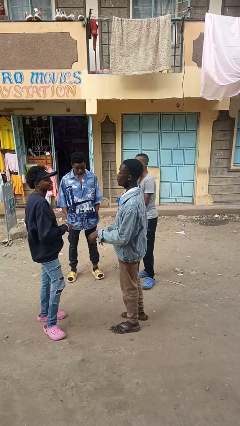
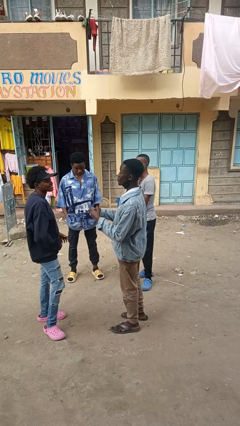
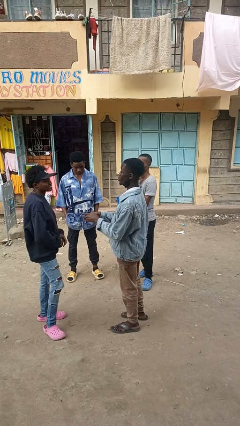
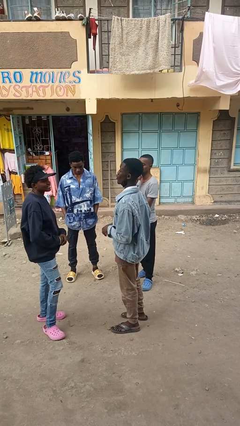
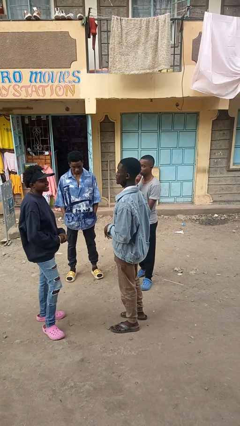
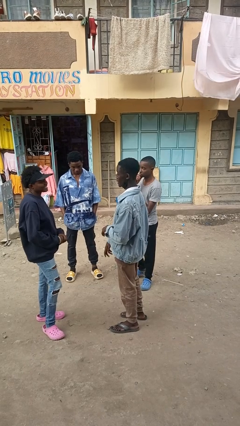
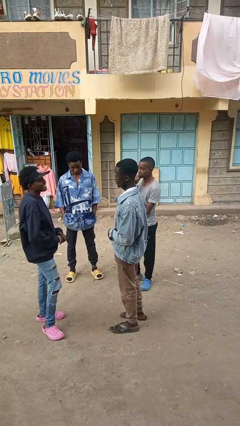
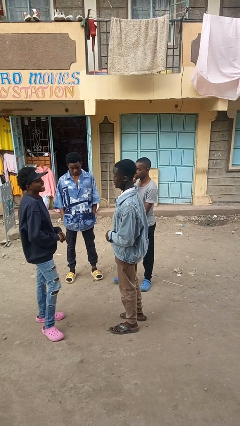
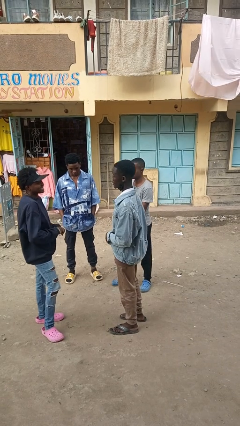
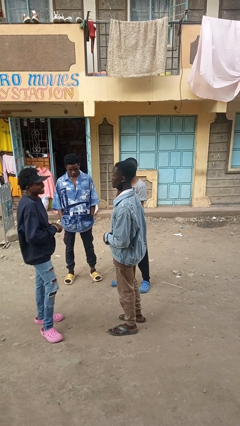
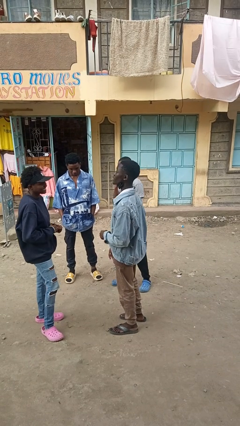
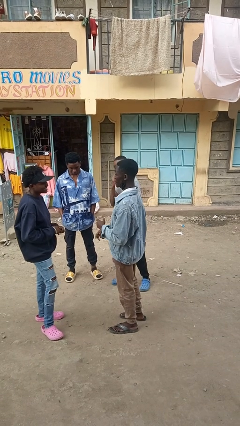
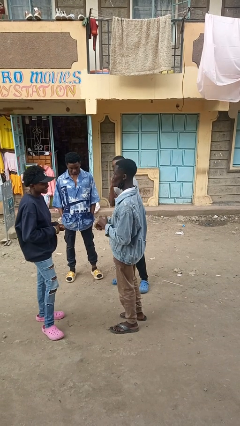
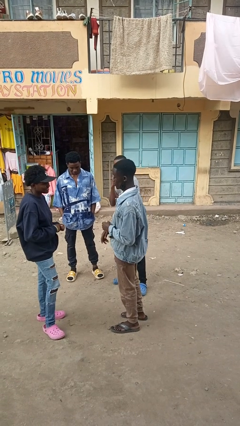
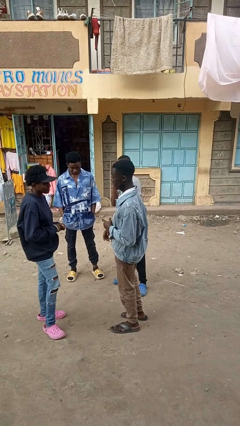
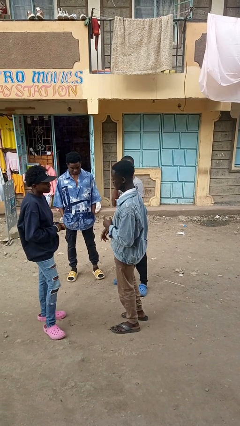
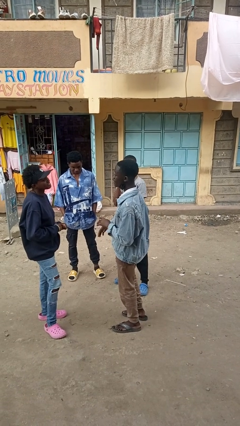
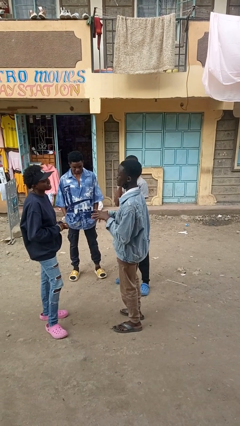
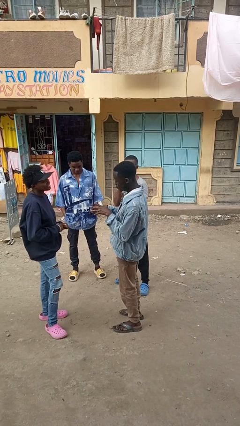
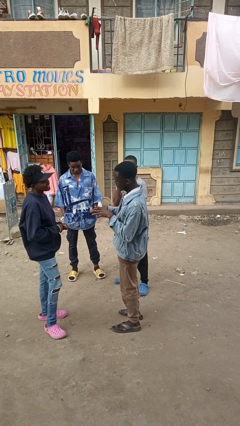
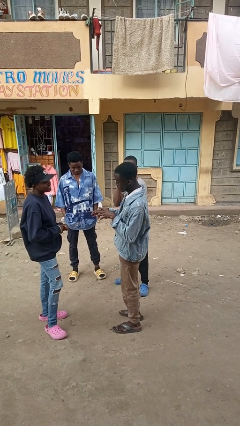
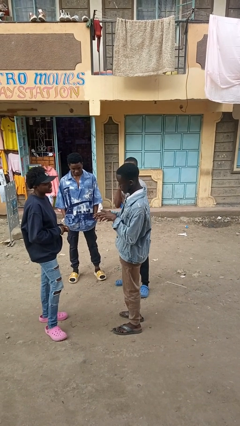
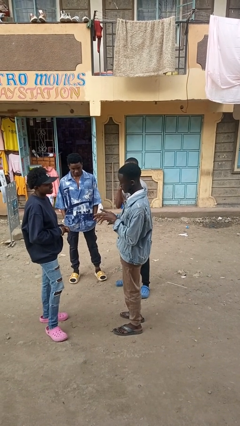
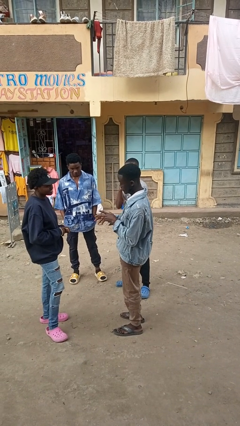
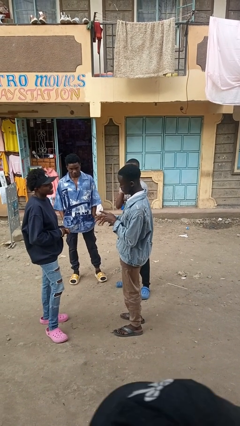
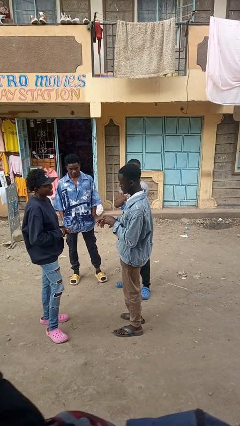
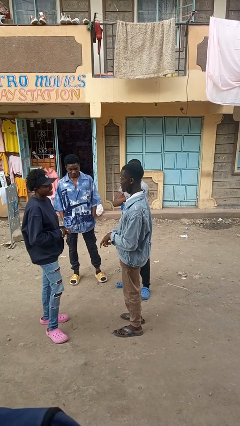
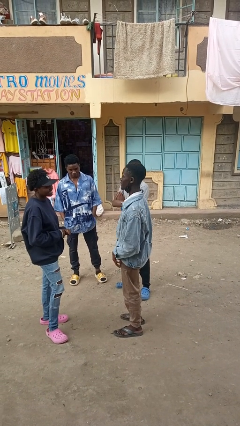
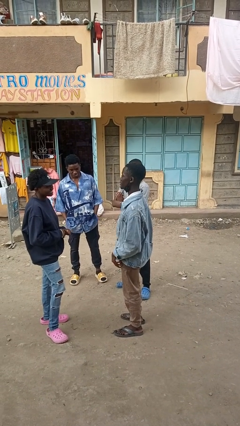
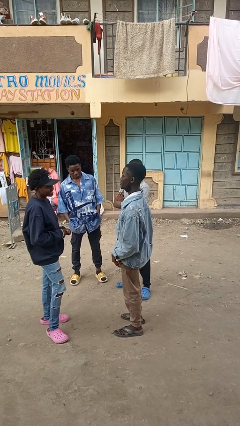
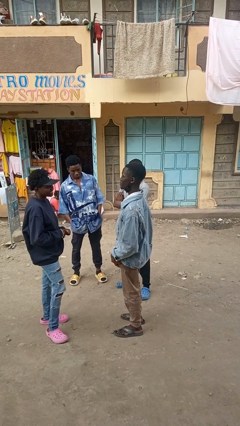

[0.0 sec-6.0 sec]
person talks to person

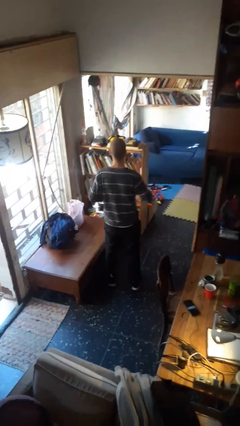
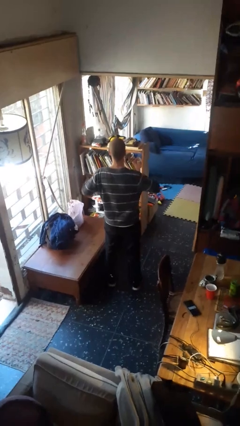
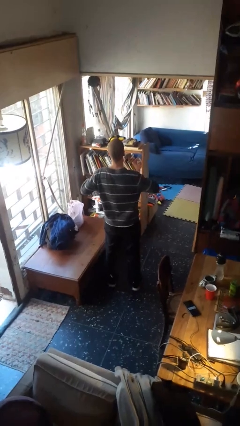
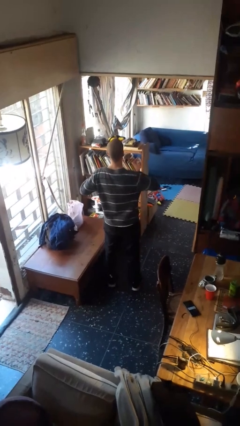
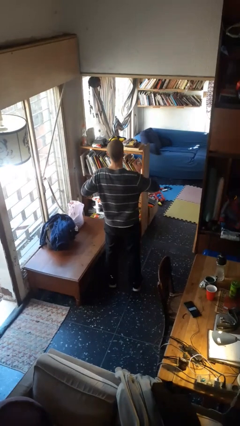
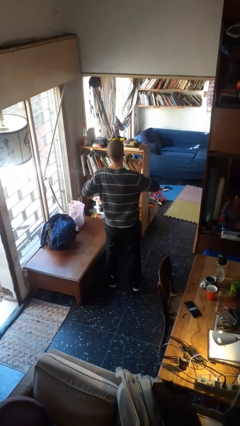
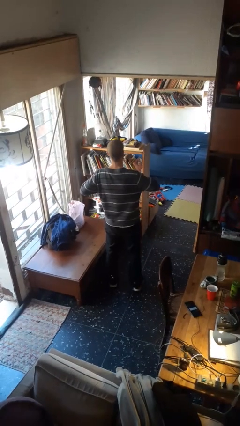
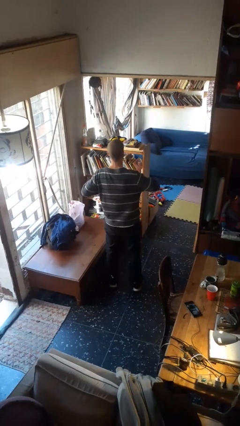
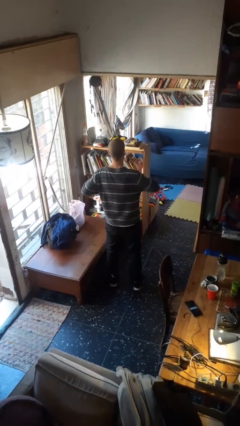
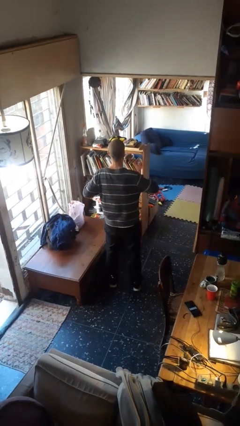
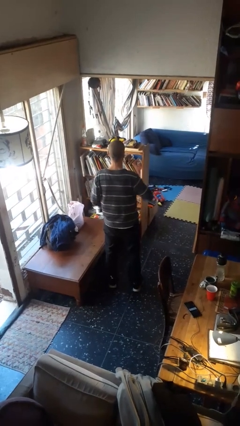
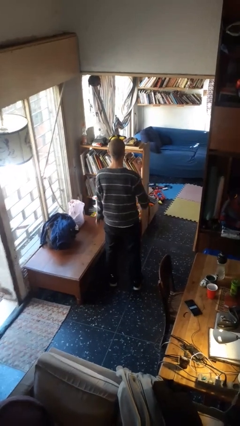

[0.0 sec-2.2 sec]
person drums on chest

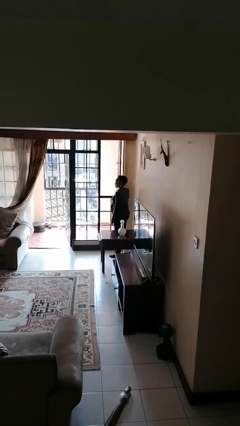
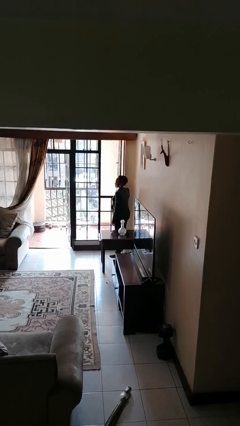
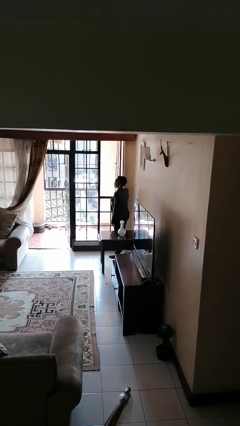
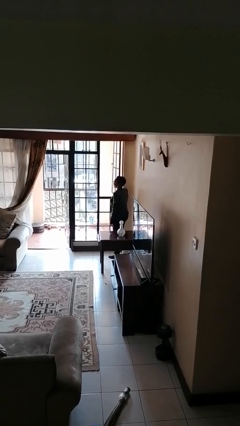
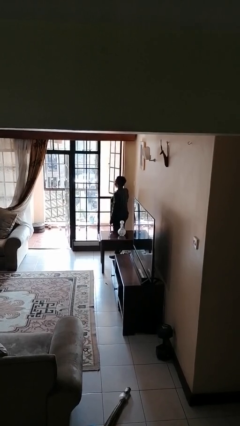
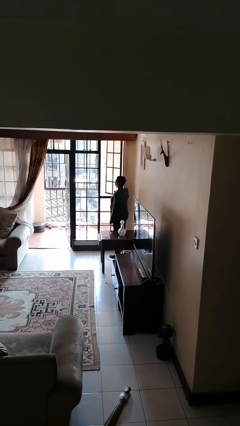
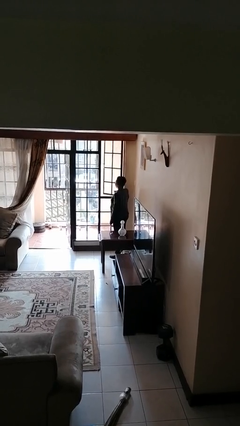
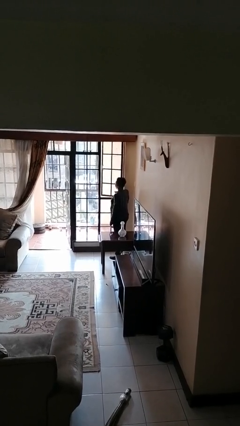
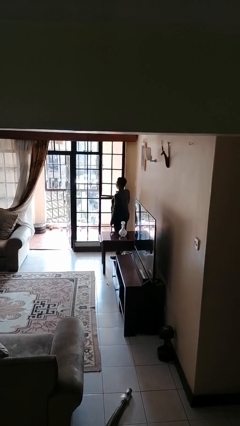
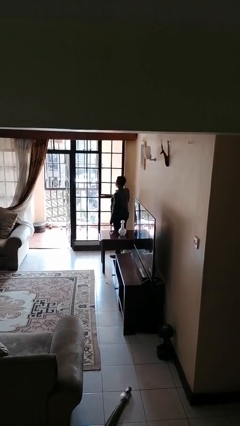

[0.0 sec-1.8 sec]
person closes home window

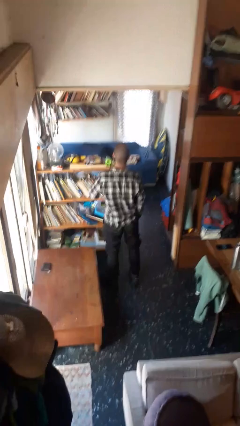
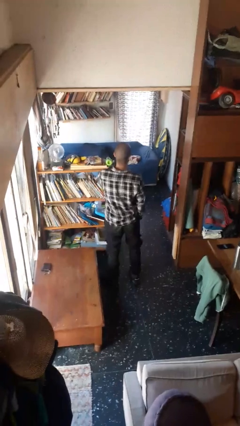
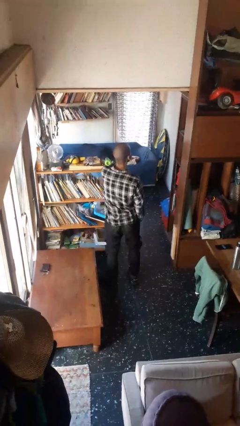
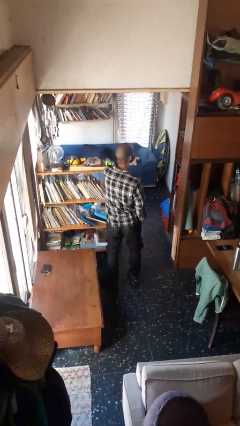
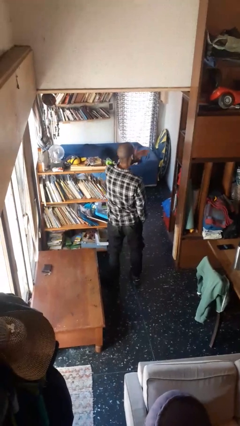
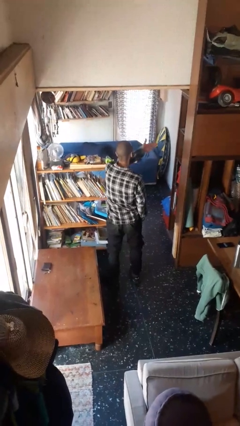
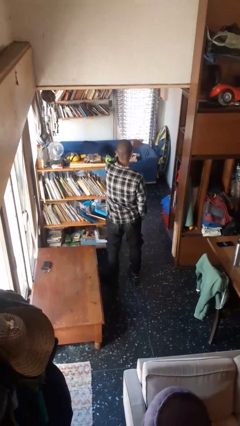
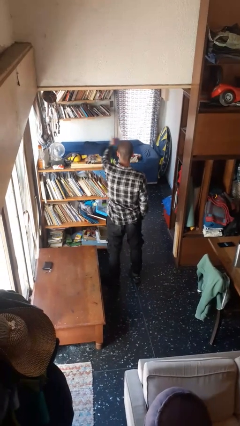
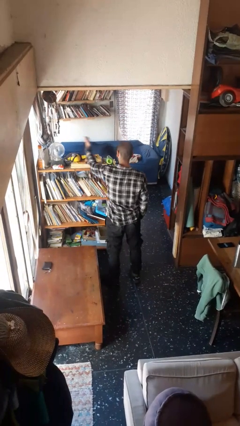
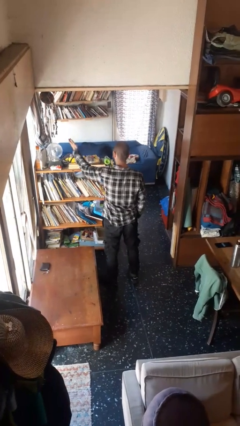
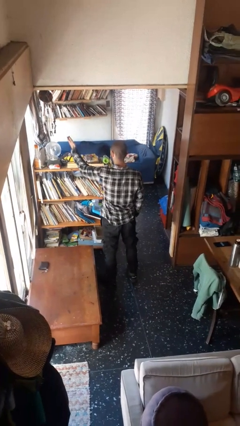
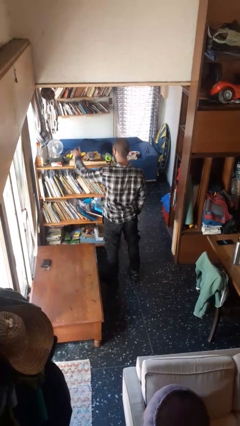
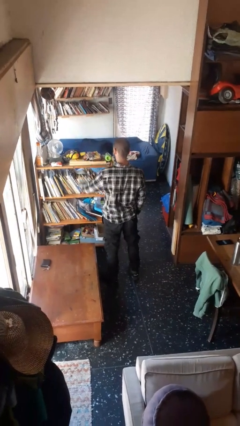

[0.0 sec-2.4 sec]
person gestures blow kiss

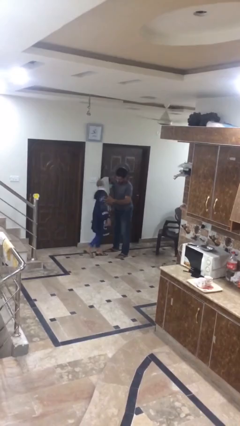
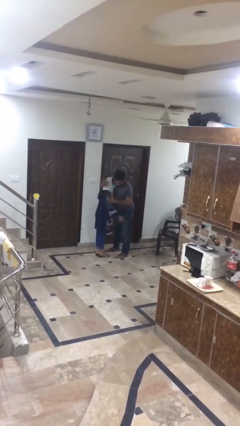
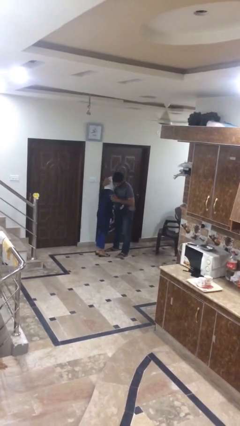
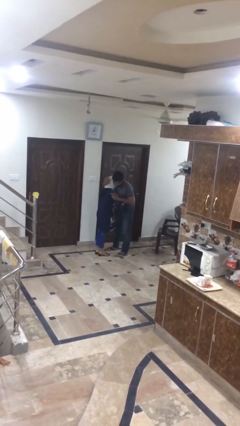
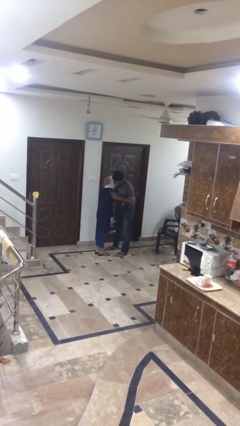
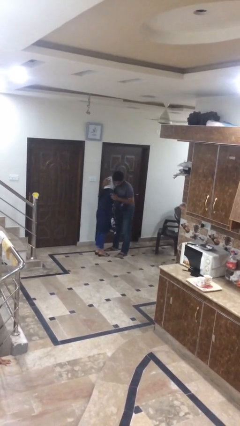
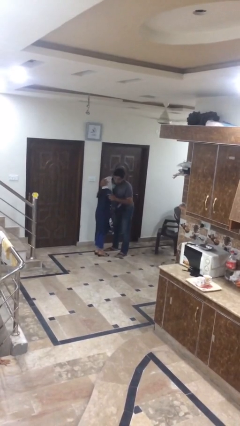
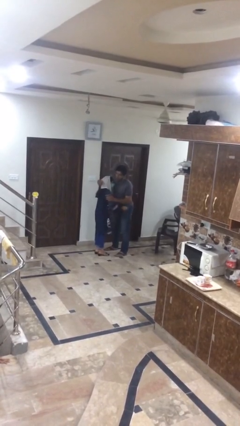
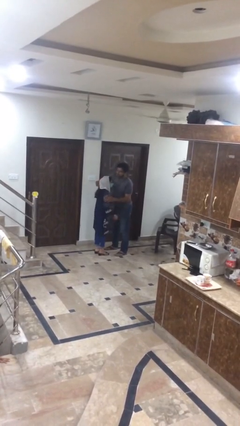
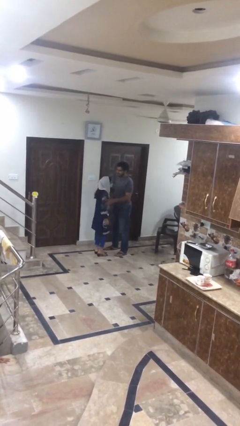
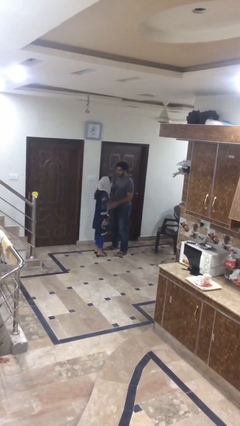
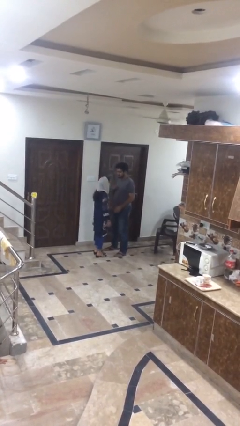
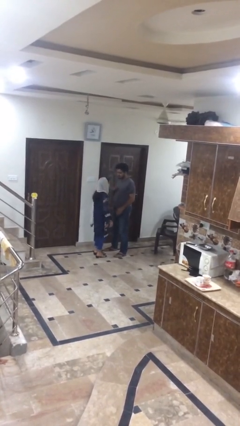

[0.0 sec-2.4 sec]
person embraces person

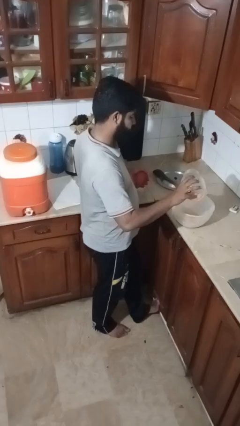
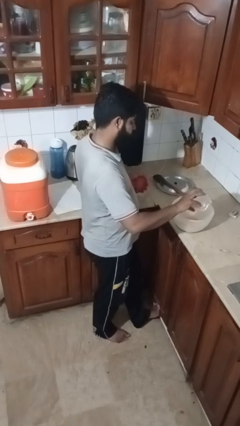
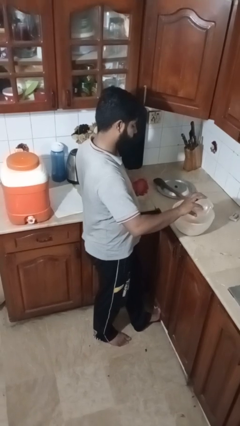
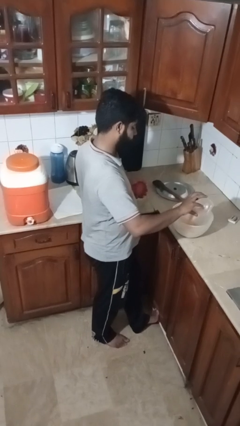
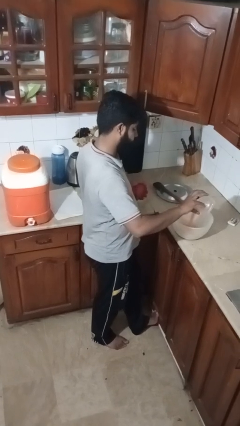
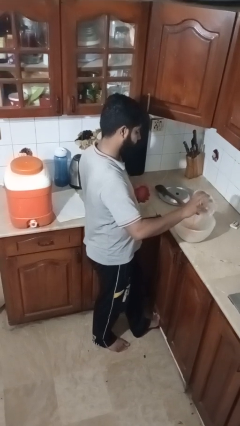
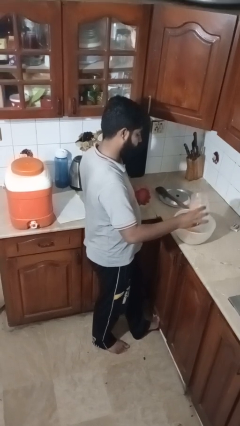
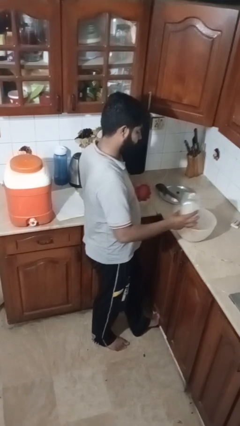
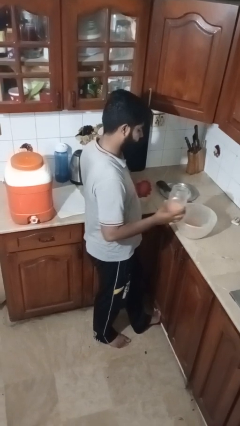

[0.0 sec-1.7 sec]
person pours into bowl

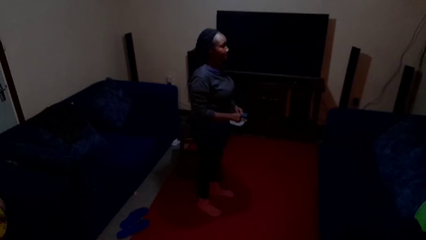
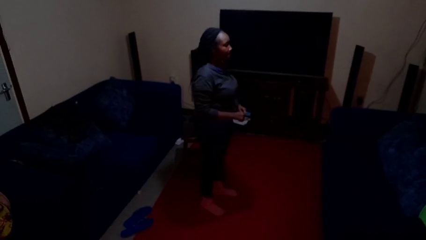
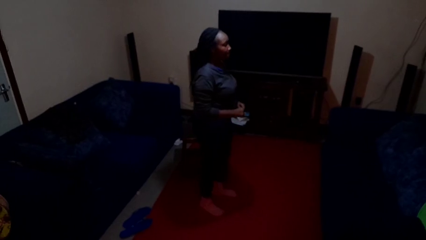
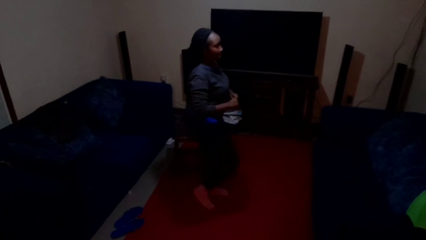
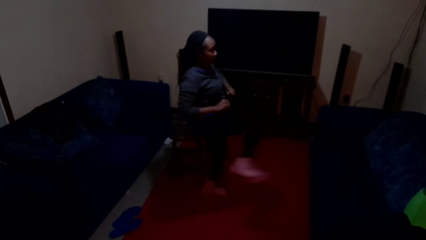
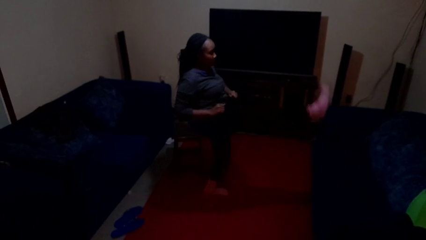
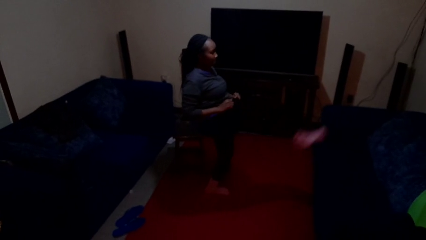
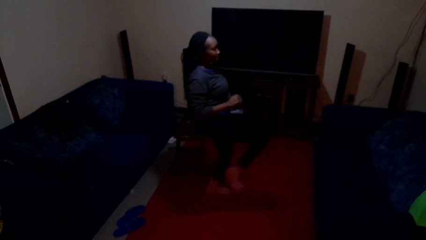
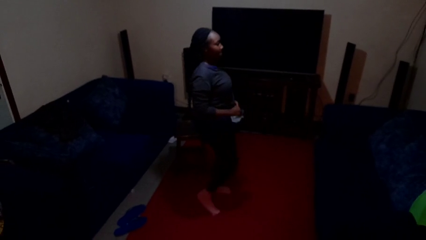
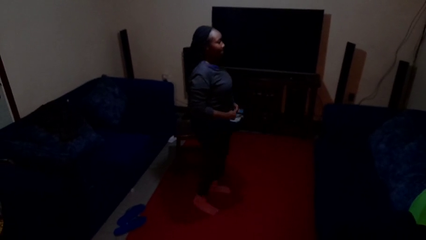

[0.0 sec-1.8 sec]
person karate kicks
